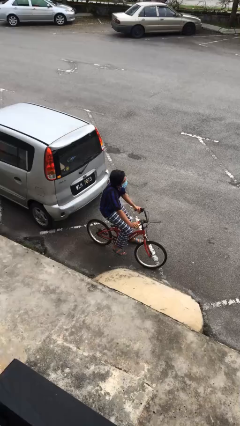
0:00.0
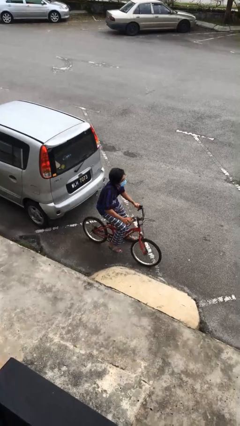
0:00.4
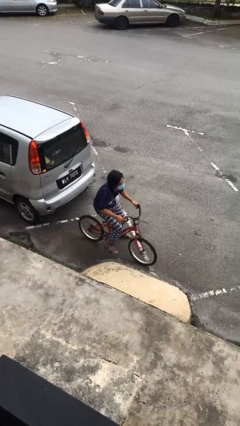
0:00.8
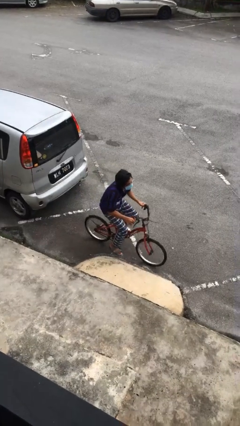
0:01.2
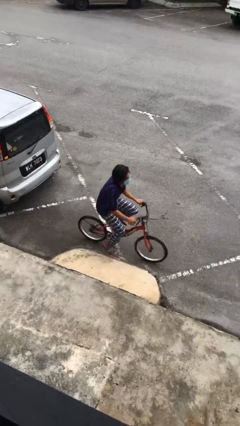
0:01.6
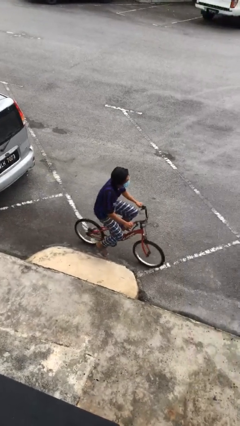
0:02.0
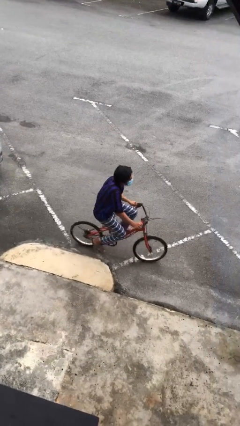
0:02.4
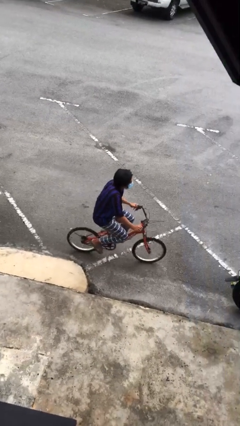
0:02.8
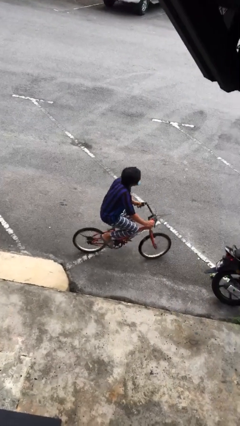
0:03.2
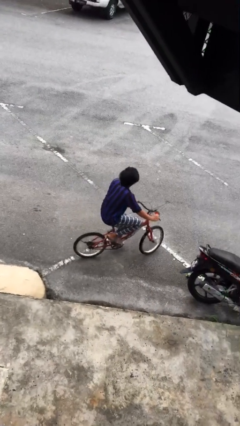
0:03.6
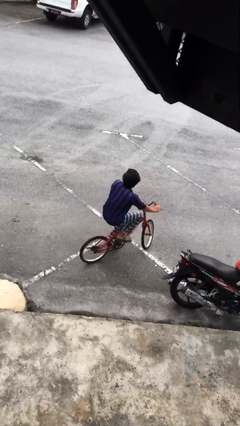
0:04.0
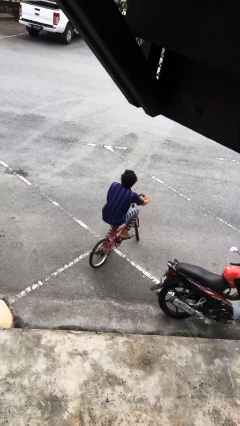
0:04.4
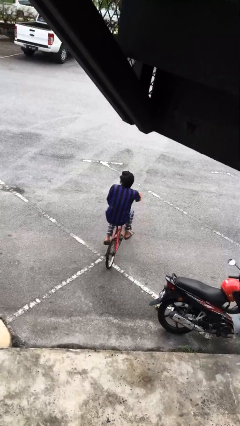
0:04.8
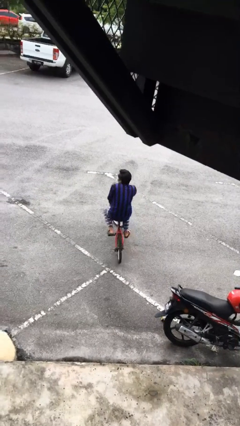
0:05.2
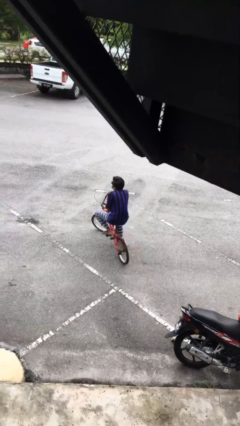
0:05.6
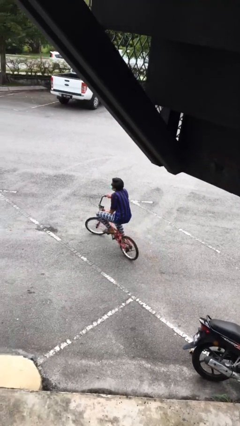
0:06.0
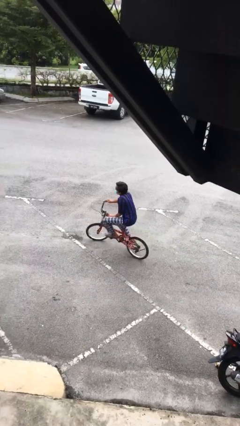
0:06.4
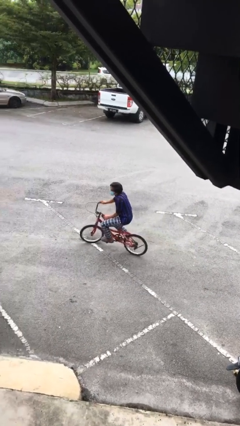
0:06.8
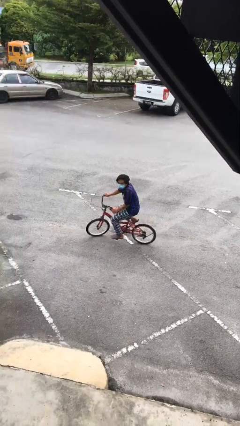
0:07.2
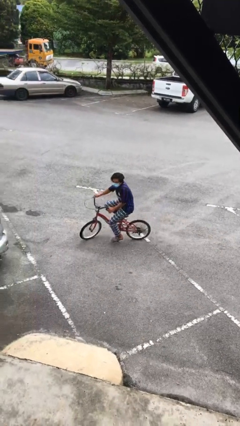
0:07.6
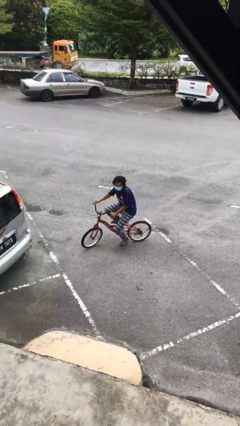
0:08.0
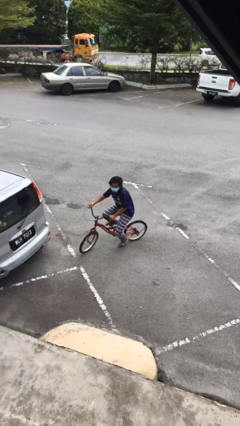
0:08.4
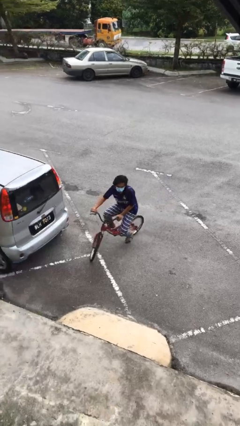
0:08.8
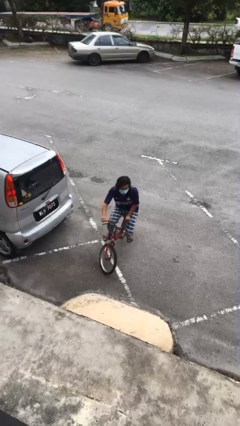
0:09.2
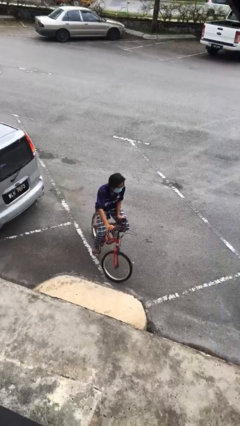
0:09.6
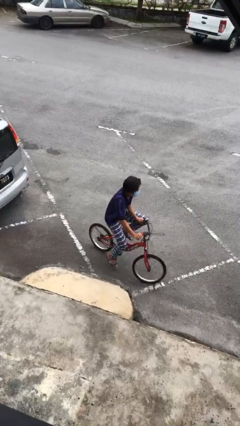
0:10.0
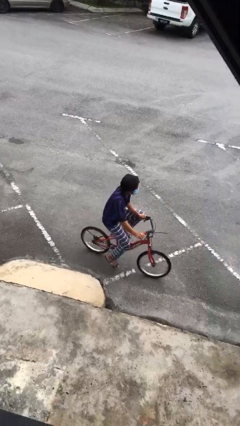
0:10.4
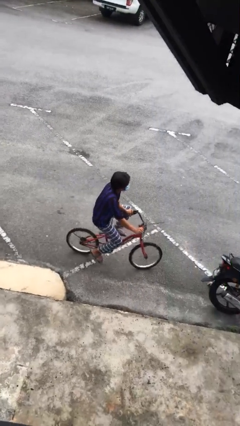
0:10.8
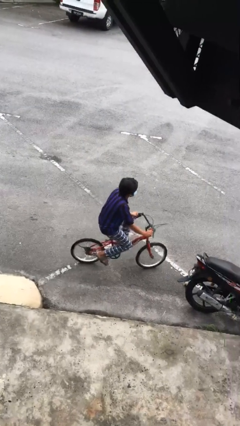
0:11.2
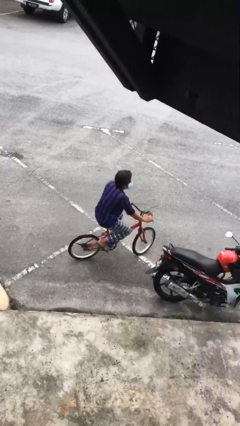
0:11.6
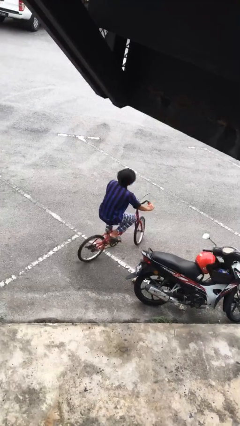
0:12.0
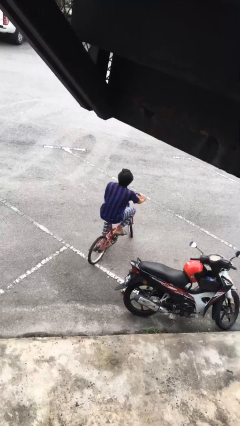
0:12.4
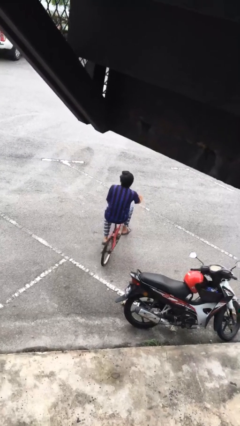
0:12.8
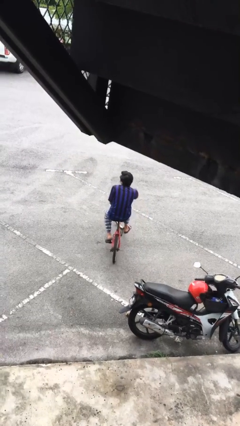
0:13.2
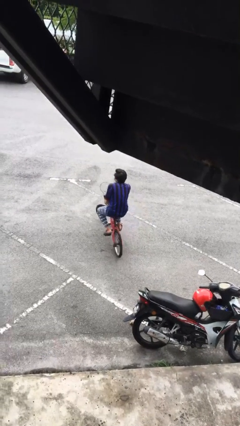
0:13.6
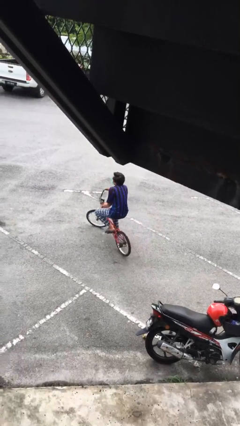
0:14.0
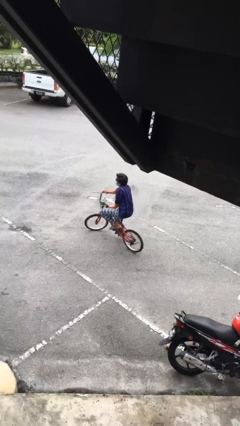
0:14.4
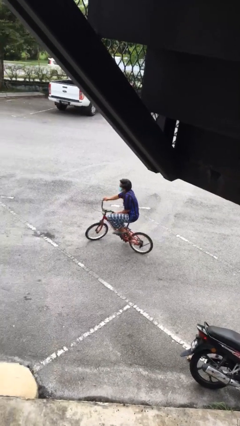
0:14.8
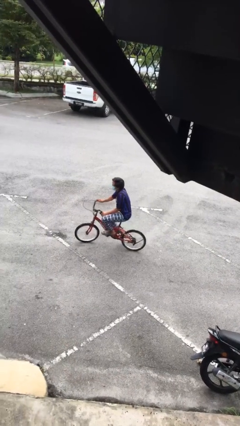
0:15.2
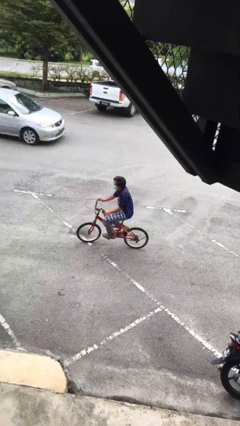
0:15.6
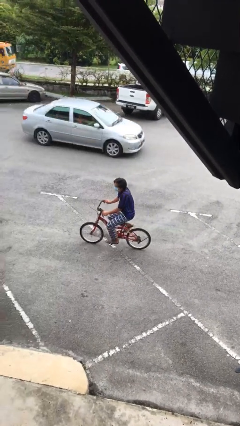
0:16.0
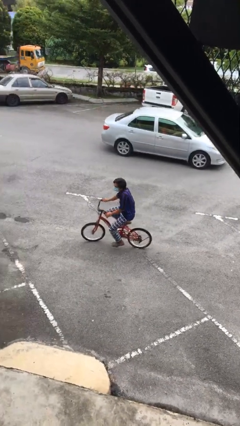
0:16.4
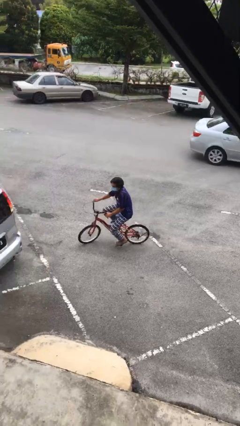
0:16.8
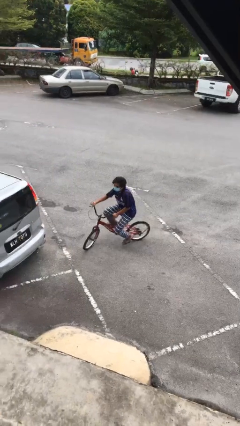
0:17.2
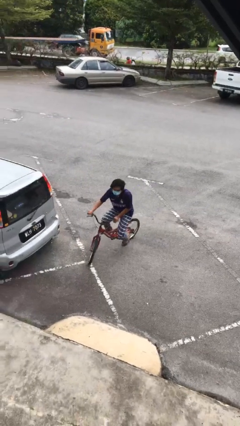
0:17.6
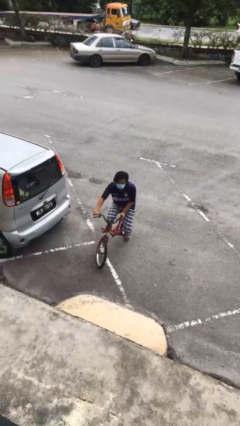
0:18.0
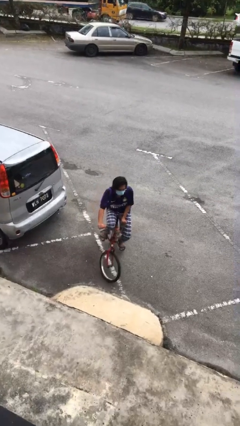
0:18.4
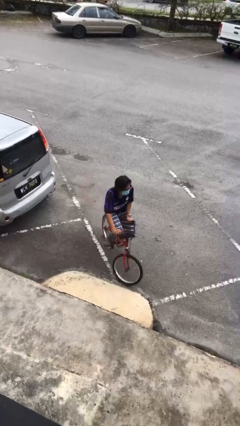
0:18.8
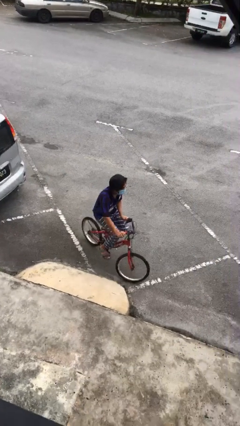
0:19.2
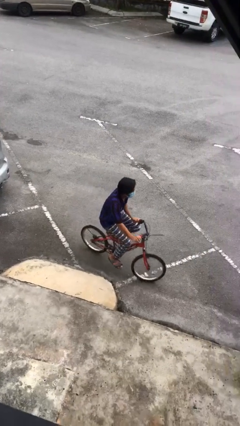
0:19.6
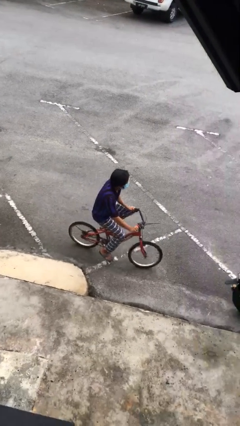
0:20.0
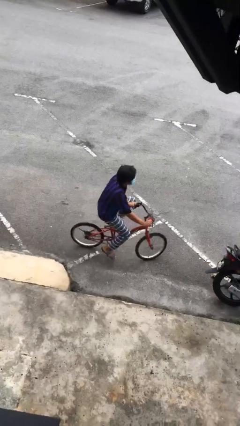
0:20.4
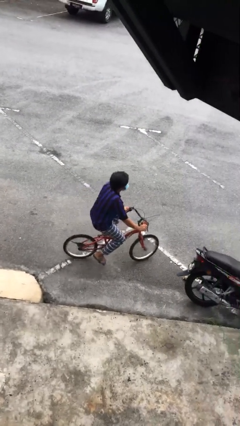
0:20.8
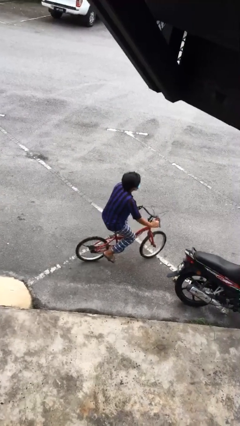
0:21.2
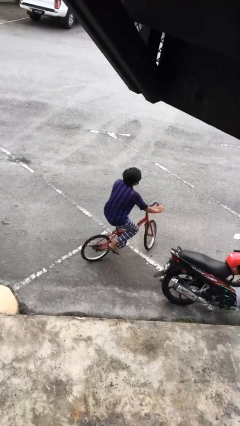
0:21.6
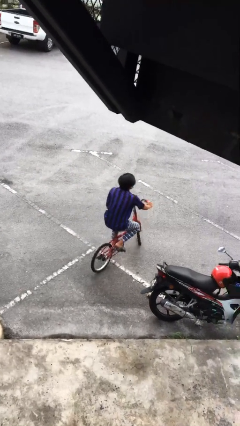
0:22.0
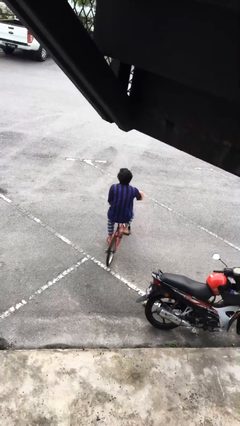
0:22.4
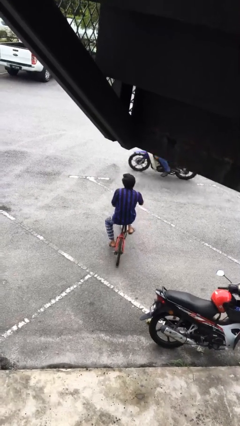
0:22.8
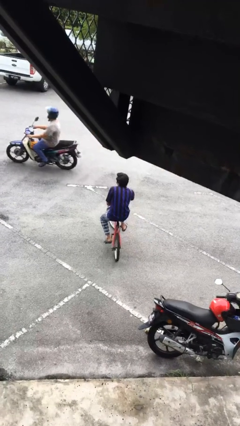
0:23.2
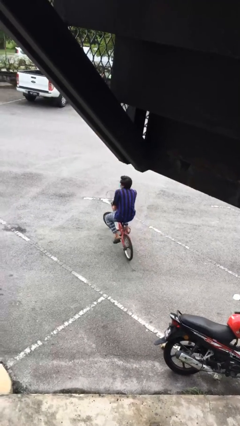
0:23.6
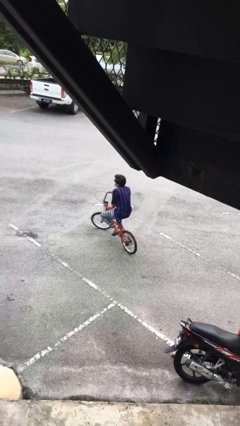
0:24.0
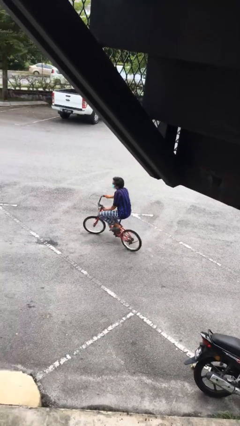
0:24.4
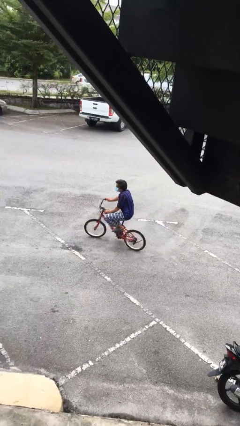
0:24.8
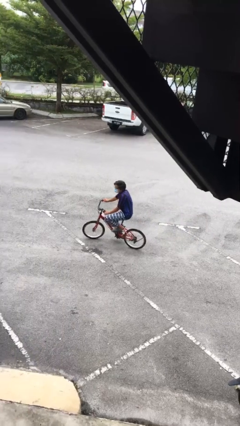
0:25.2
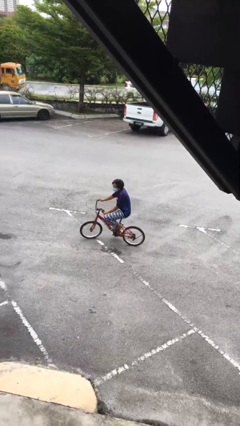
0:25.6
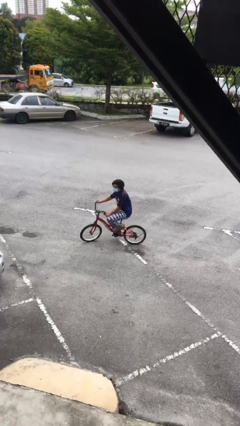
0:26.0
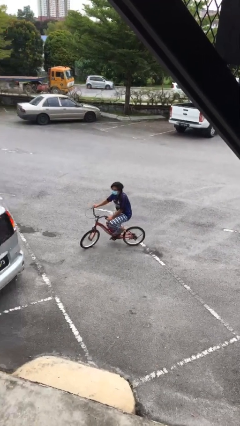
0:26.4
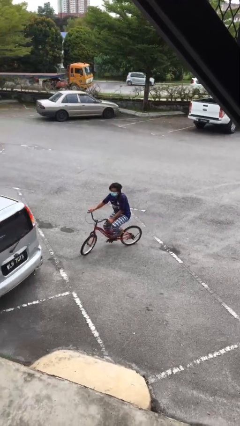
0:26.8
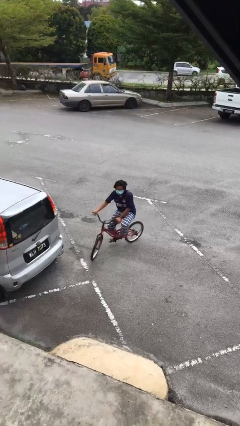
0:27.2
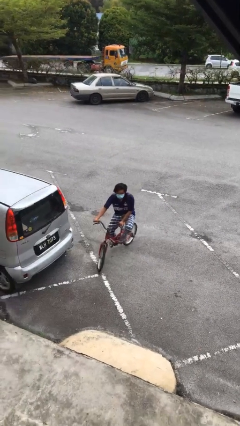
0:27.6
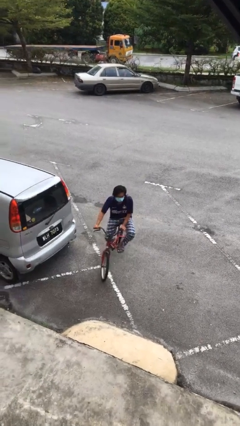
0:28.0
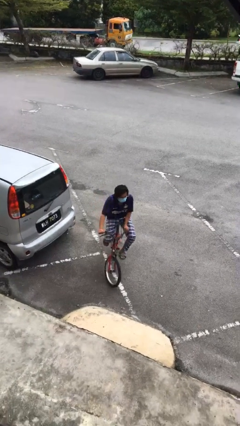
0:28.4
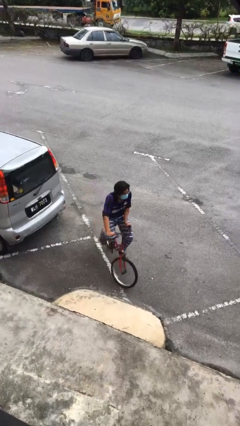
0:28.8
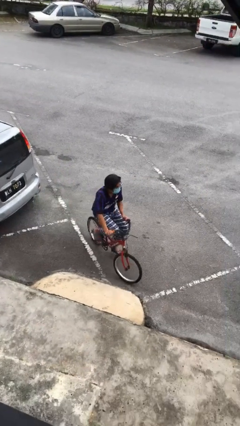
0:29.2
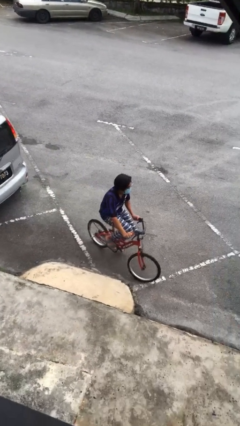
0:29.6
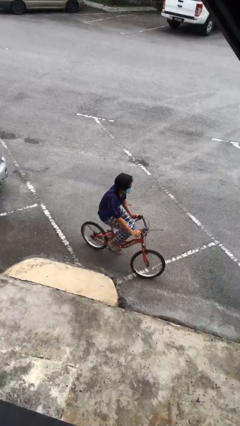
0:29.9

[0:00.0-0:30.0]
person rides bicycle

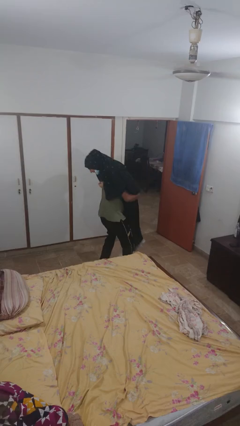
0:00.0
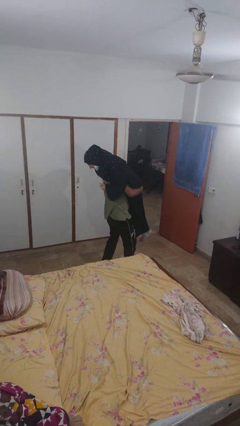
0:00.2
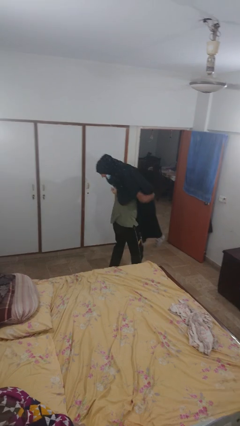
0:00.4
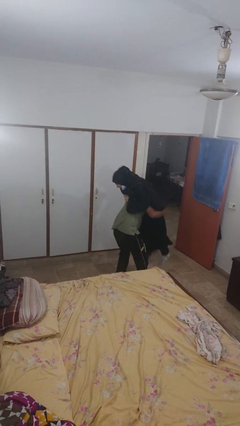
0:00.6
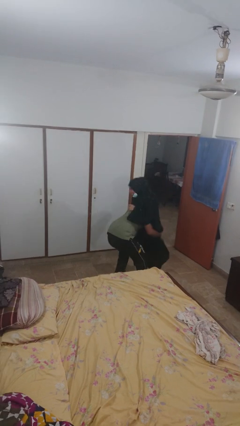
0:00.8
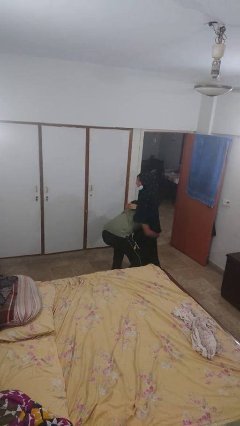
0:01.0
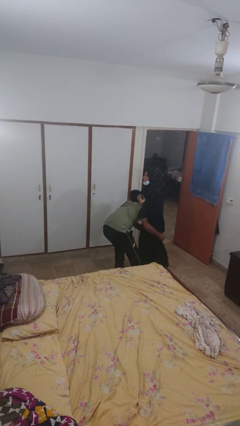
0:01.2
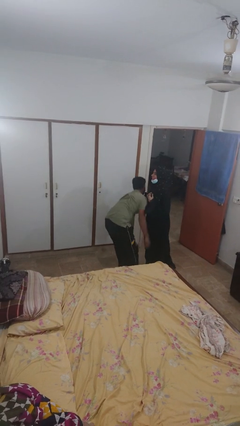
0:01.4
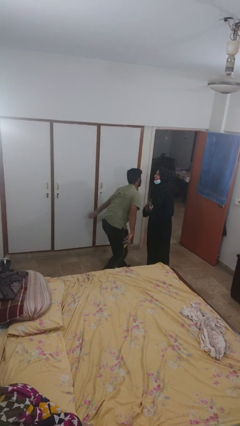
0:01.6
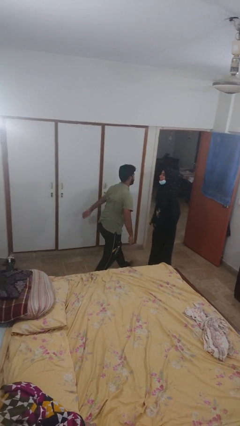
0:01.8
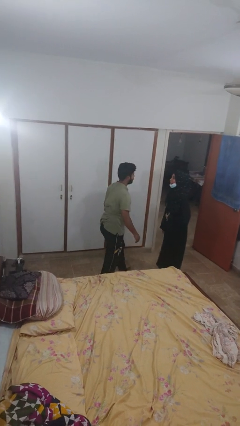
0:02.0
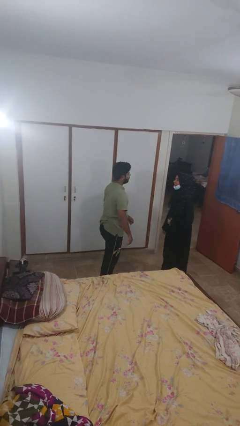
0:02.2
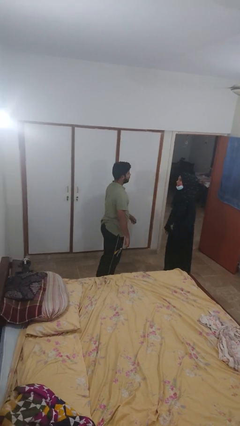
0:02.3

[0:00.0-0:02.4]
person puts down person

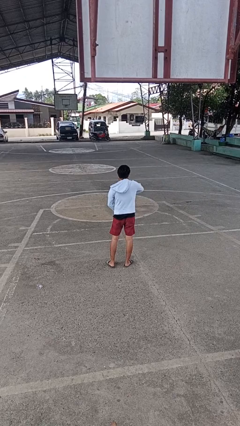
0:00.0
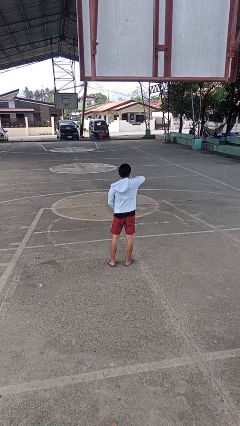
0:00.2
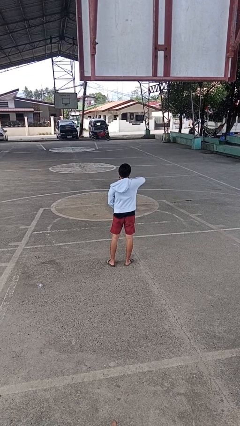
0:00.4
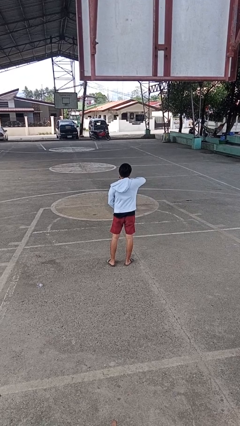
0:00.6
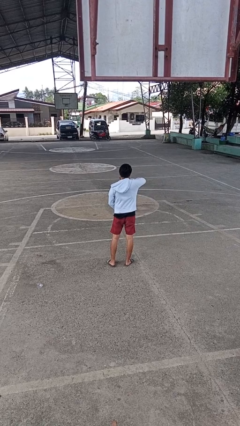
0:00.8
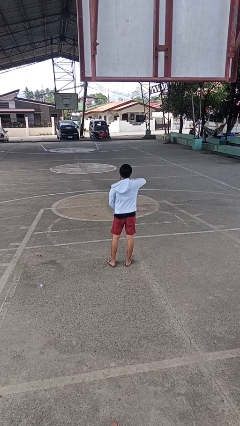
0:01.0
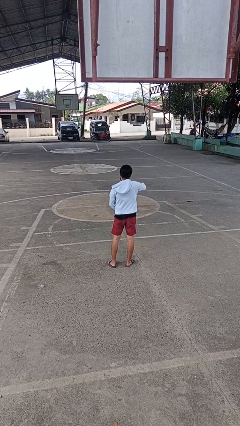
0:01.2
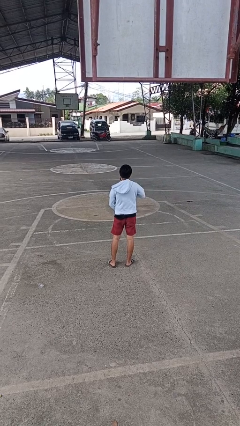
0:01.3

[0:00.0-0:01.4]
person zips up jacket
